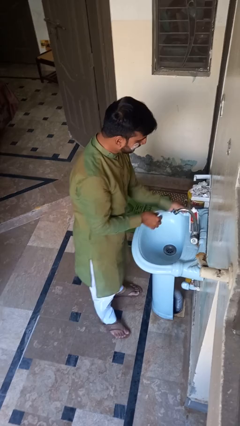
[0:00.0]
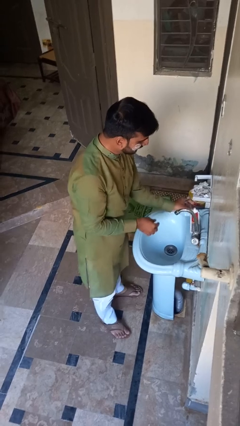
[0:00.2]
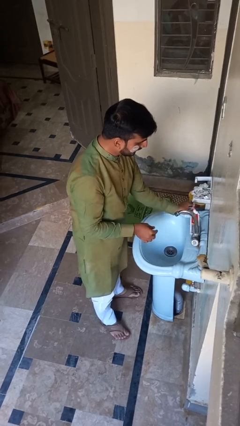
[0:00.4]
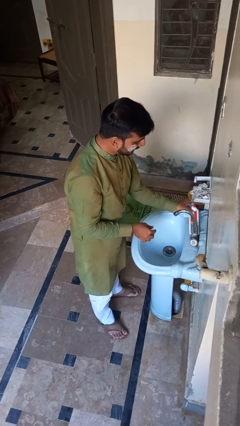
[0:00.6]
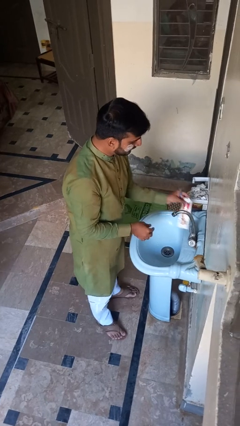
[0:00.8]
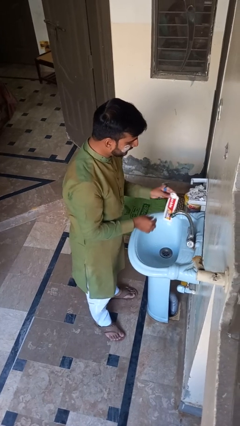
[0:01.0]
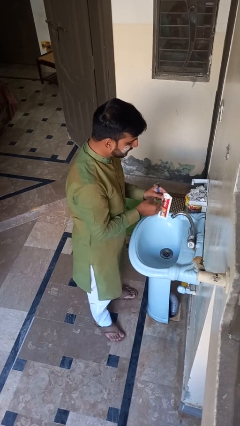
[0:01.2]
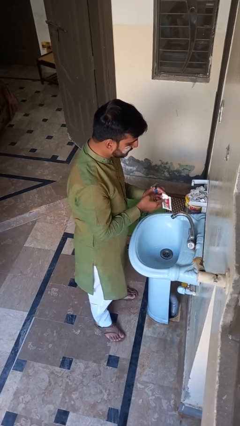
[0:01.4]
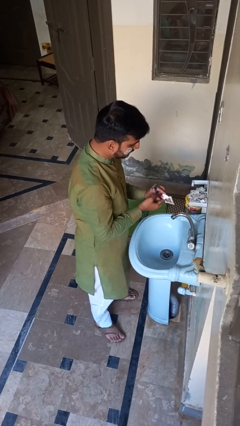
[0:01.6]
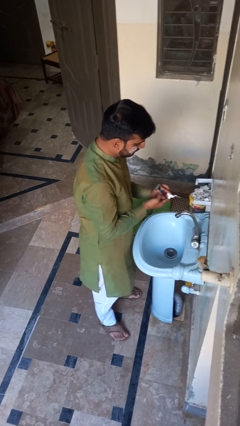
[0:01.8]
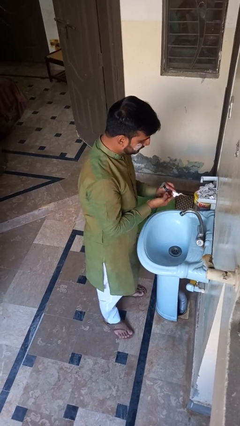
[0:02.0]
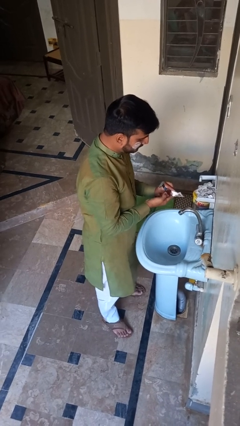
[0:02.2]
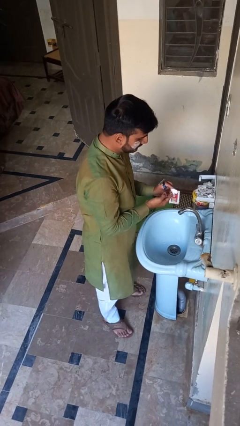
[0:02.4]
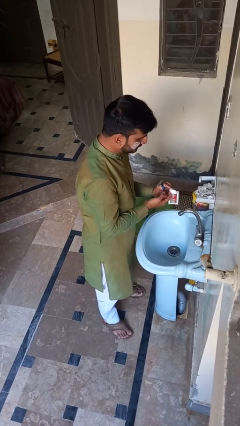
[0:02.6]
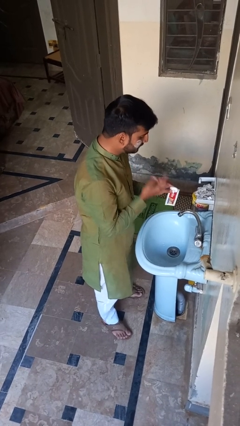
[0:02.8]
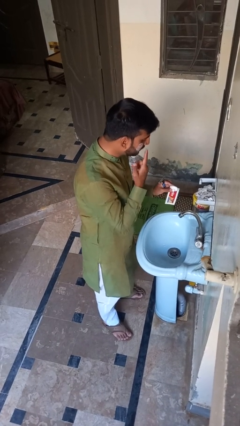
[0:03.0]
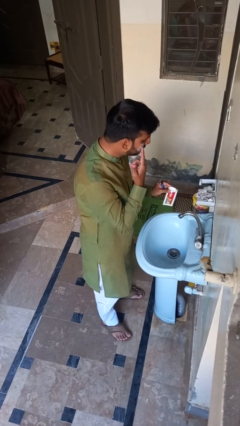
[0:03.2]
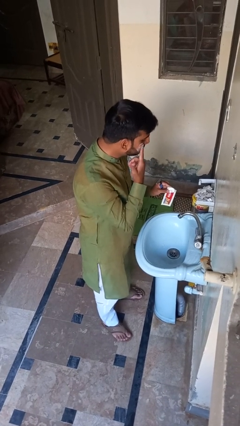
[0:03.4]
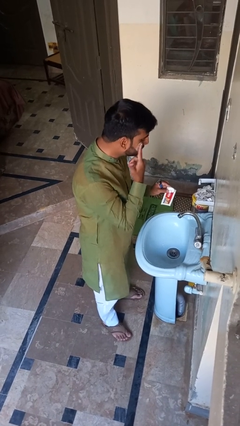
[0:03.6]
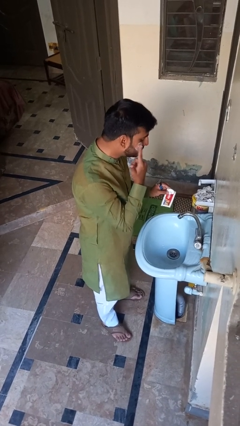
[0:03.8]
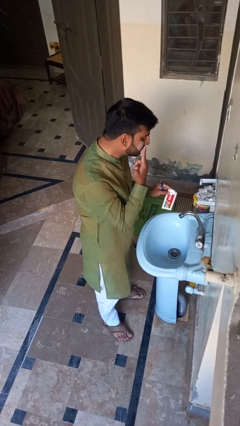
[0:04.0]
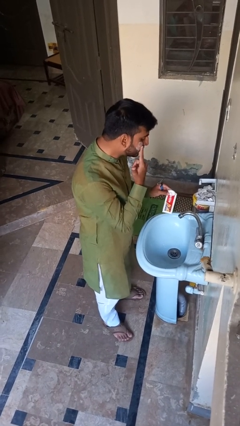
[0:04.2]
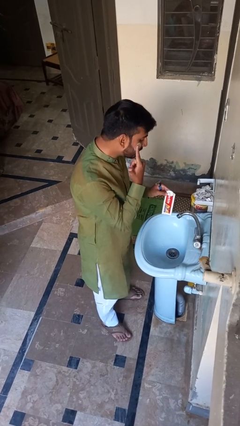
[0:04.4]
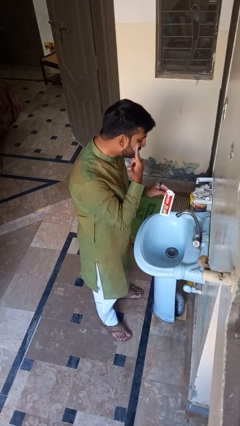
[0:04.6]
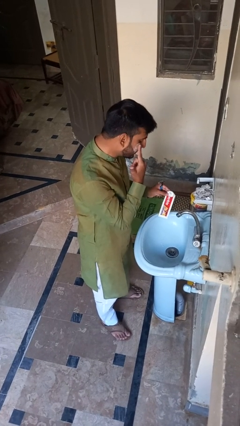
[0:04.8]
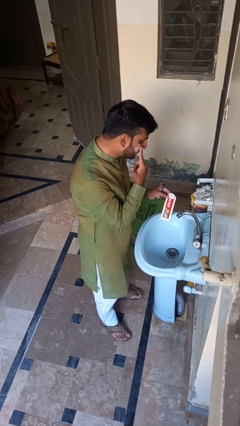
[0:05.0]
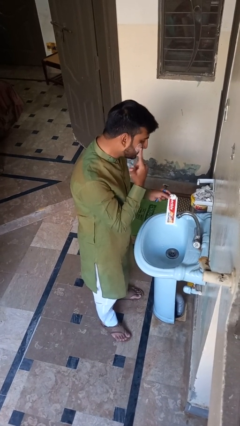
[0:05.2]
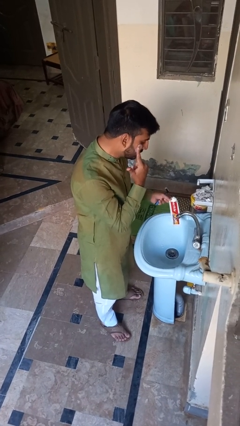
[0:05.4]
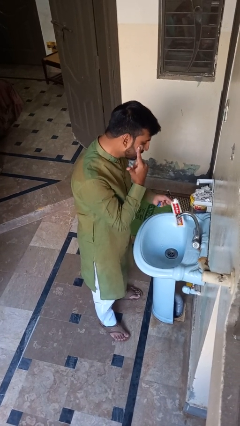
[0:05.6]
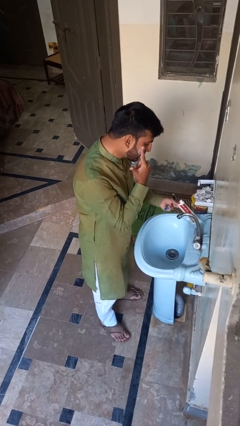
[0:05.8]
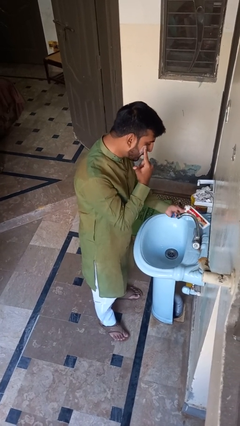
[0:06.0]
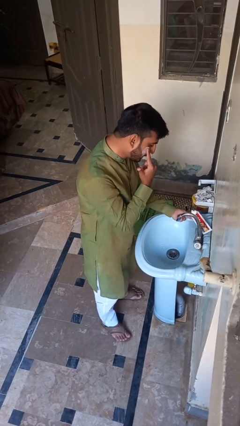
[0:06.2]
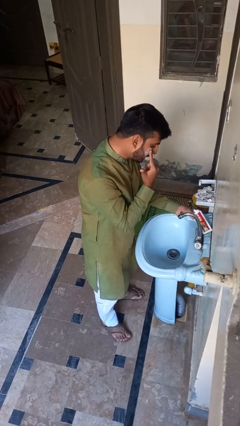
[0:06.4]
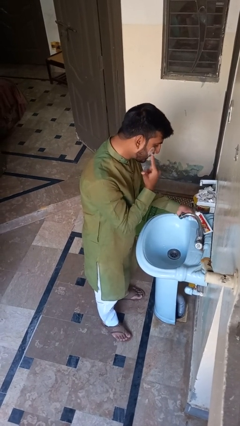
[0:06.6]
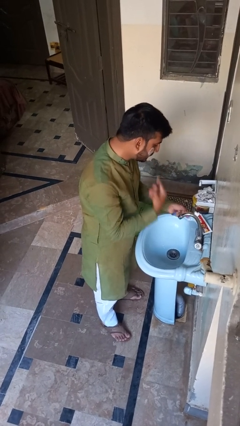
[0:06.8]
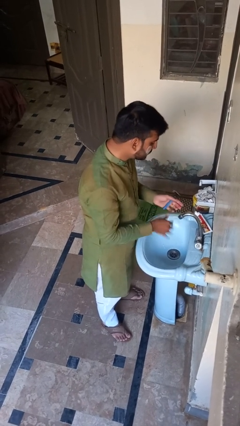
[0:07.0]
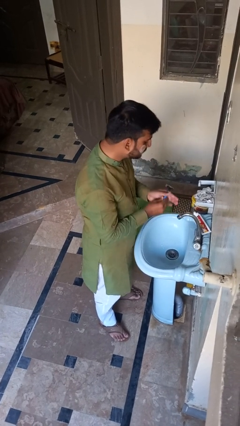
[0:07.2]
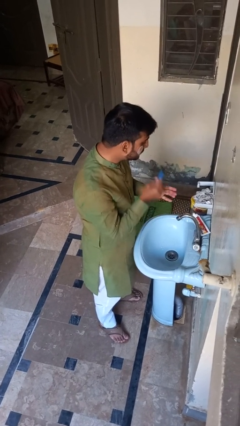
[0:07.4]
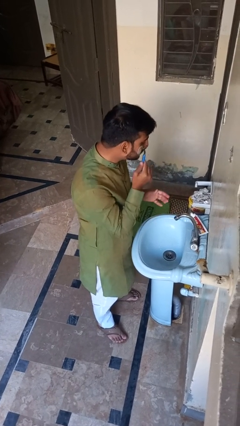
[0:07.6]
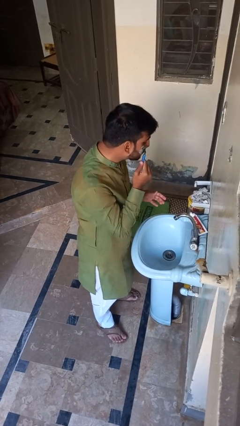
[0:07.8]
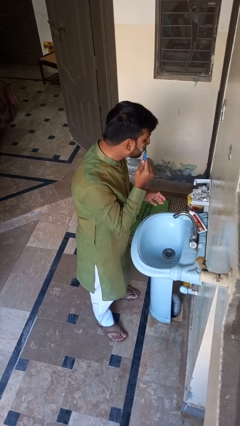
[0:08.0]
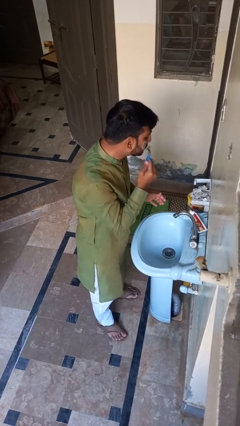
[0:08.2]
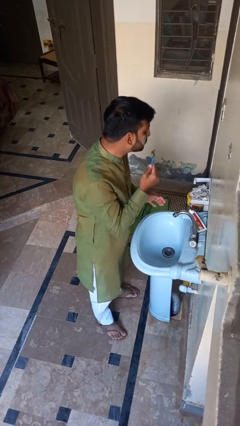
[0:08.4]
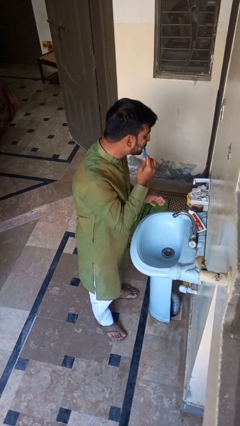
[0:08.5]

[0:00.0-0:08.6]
person applies shaving cream

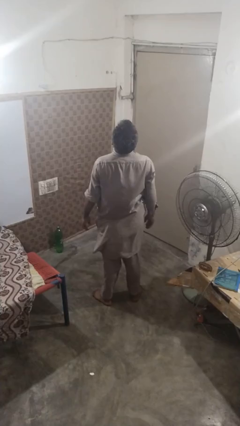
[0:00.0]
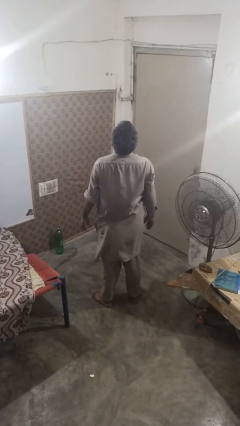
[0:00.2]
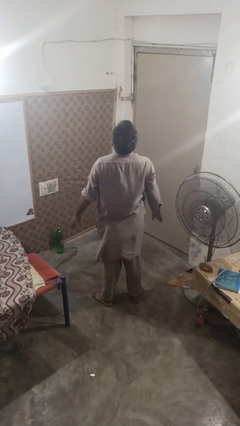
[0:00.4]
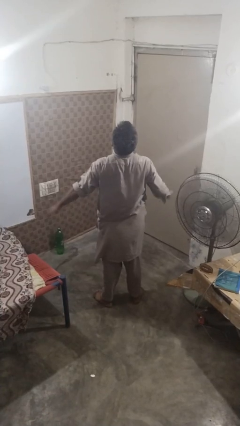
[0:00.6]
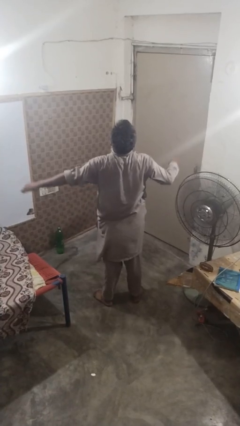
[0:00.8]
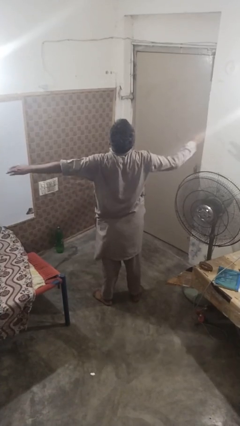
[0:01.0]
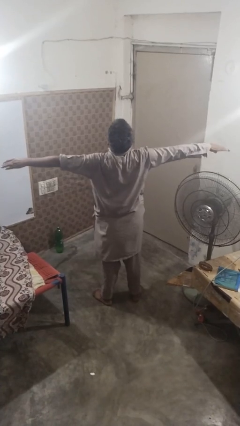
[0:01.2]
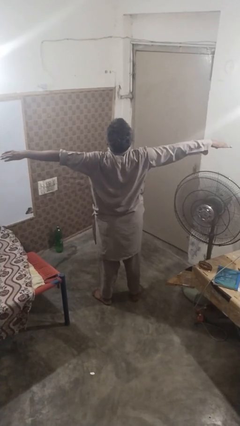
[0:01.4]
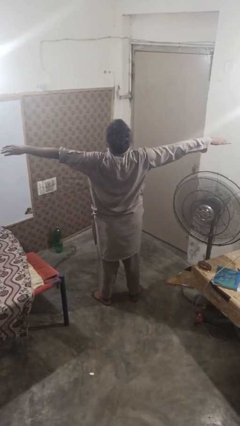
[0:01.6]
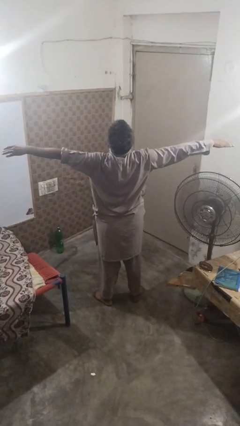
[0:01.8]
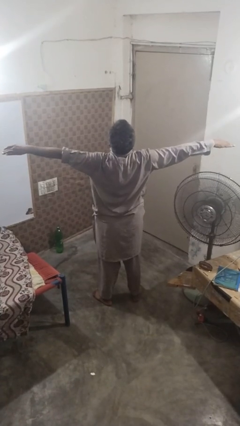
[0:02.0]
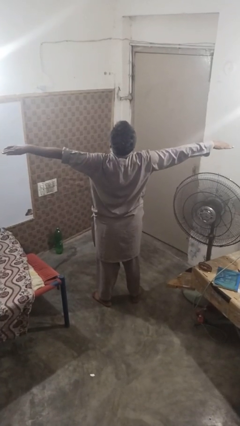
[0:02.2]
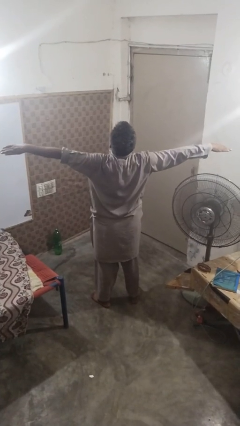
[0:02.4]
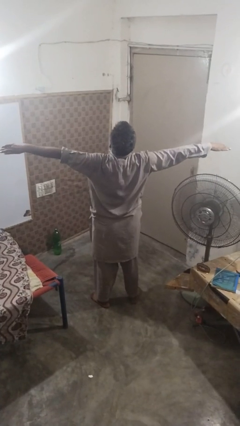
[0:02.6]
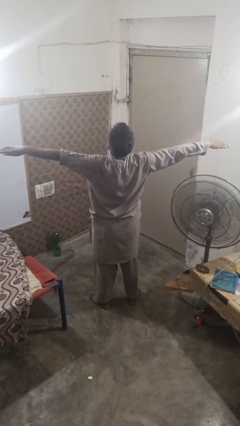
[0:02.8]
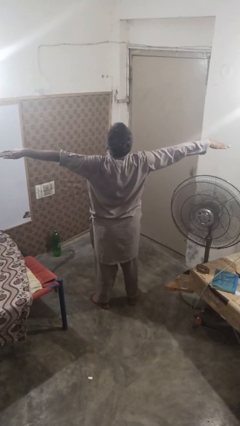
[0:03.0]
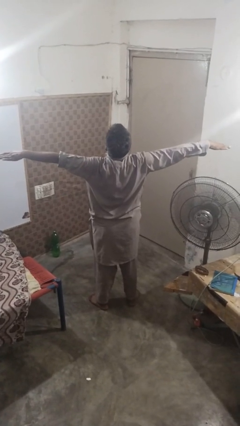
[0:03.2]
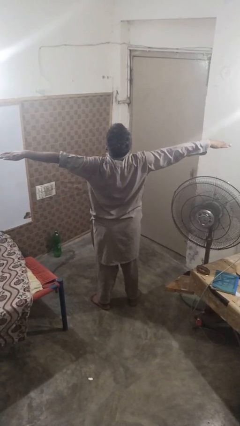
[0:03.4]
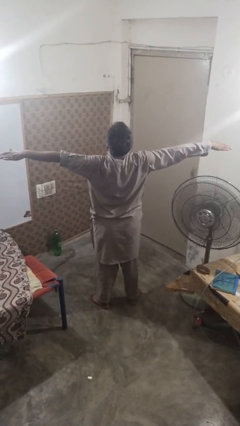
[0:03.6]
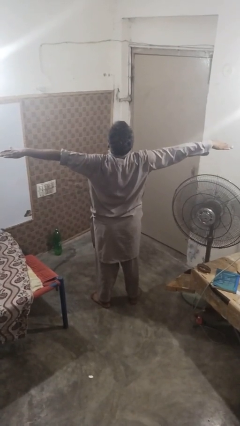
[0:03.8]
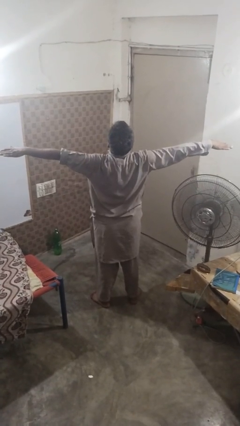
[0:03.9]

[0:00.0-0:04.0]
person stretches arms to side

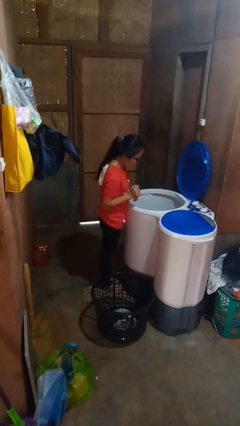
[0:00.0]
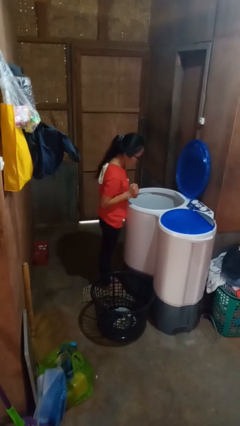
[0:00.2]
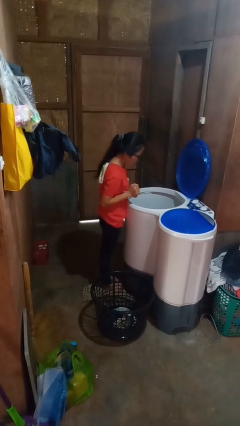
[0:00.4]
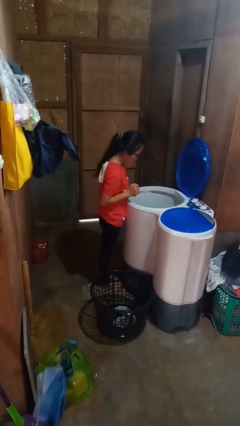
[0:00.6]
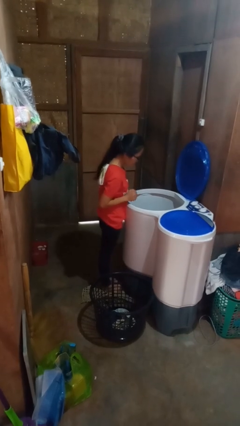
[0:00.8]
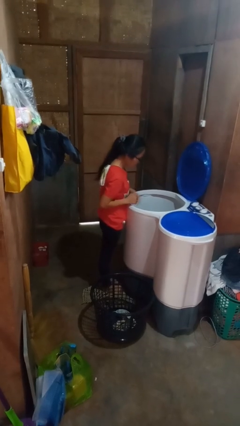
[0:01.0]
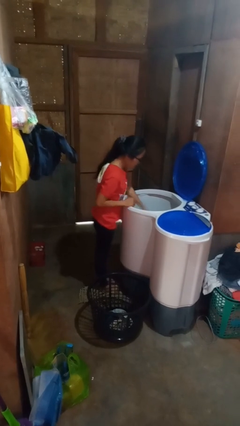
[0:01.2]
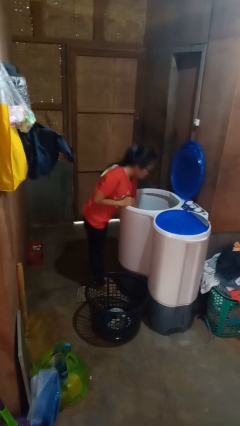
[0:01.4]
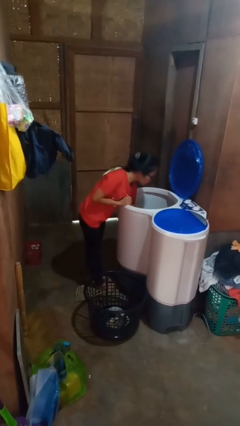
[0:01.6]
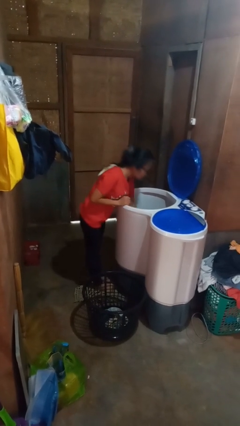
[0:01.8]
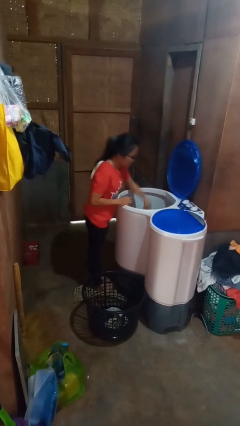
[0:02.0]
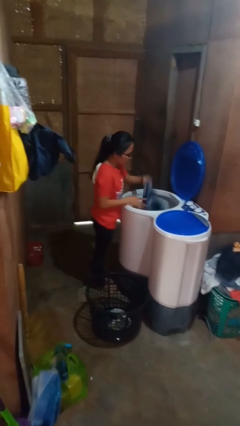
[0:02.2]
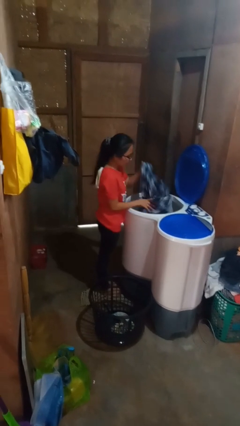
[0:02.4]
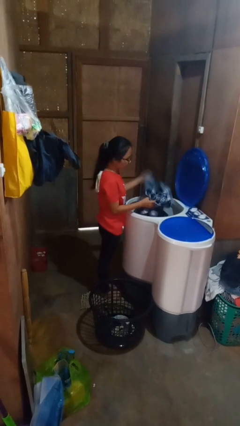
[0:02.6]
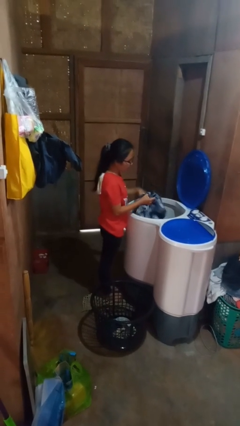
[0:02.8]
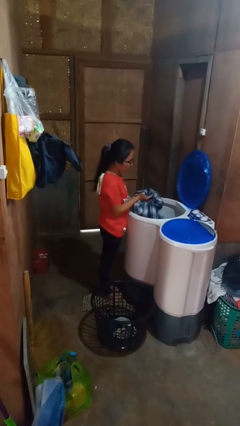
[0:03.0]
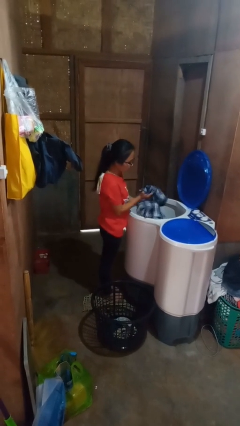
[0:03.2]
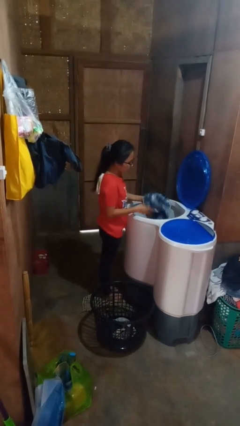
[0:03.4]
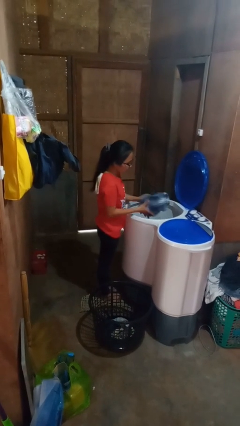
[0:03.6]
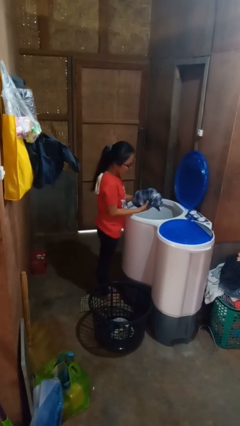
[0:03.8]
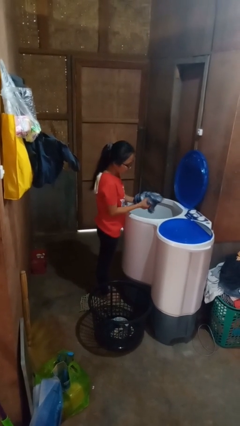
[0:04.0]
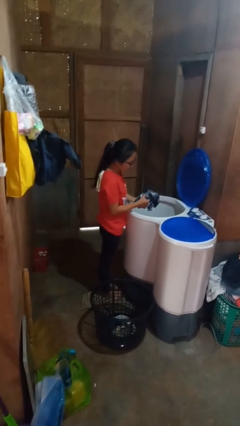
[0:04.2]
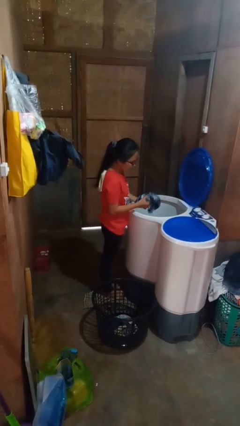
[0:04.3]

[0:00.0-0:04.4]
person loads clotheswasher

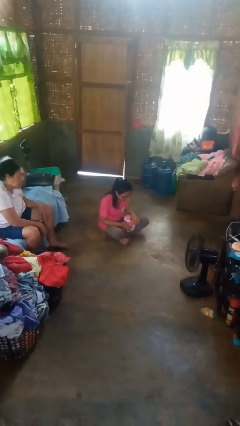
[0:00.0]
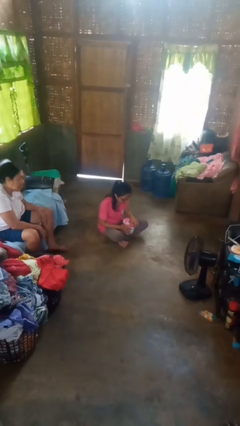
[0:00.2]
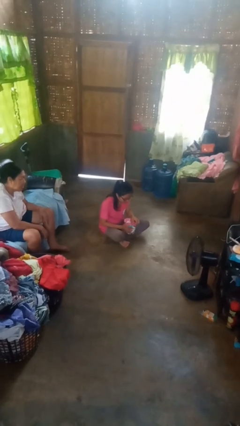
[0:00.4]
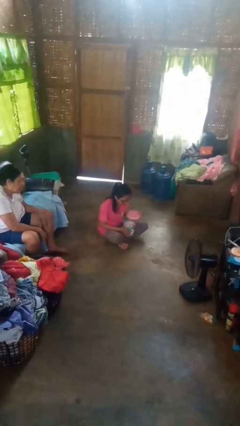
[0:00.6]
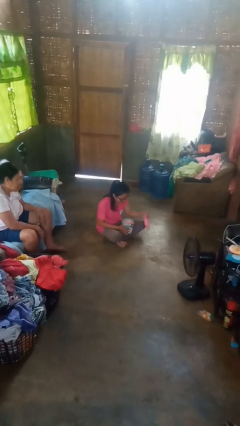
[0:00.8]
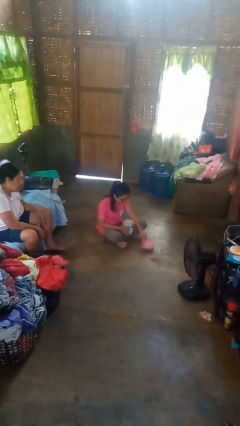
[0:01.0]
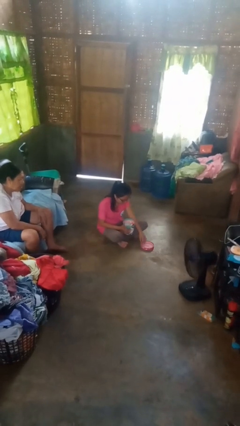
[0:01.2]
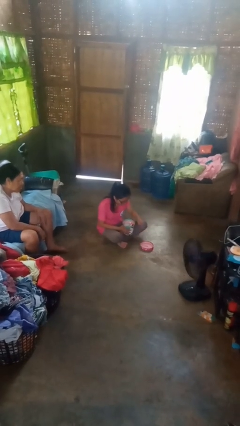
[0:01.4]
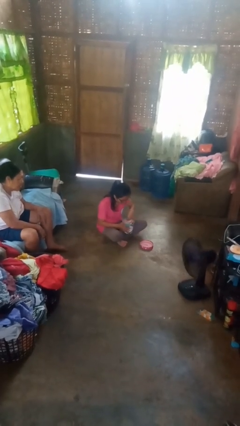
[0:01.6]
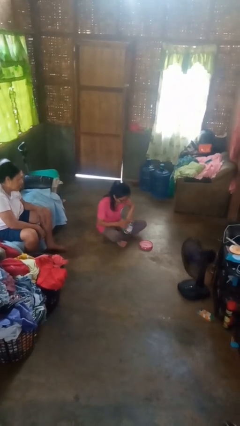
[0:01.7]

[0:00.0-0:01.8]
person opens jewelry box
